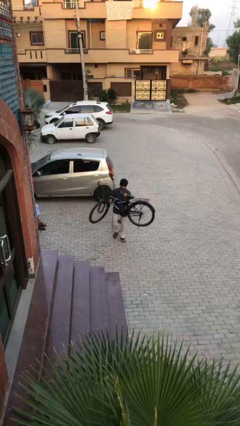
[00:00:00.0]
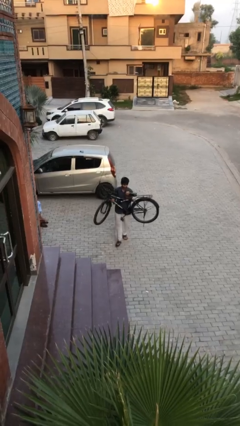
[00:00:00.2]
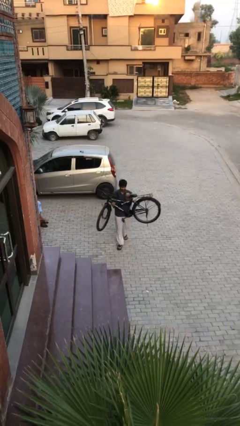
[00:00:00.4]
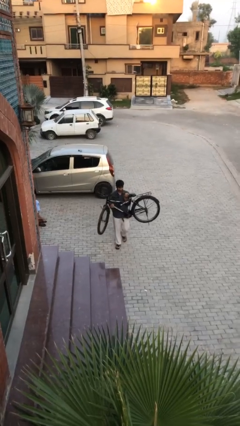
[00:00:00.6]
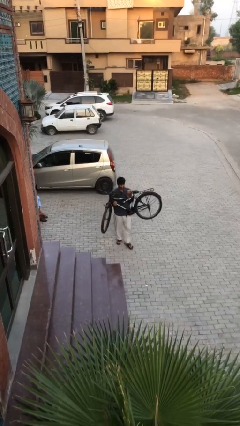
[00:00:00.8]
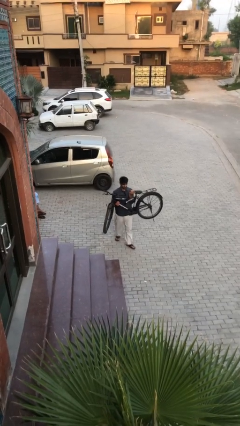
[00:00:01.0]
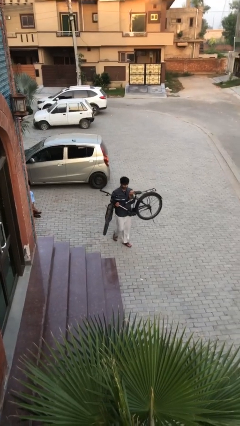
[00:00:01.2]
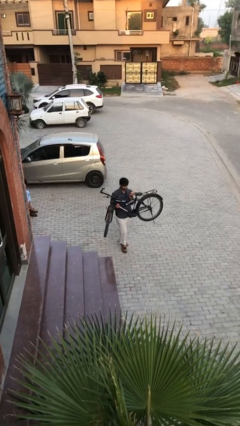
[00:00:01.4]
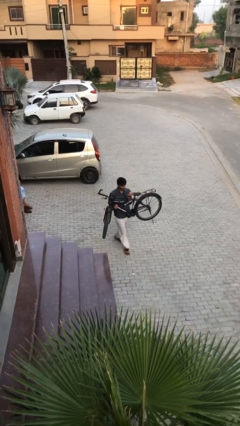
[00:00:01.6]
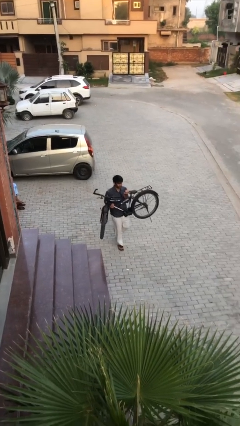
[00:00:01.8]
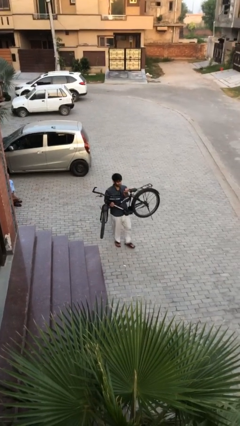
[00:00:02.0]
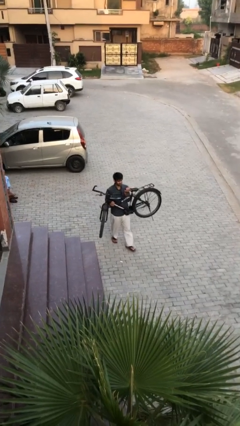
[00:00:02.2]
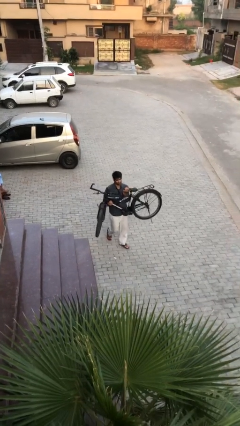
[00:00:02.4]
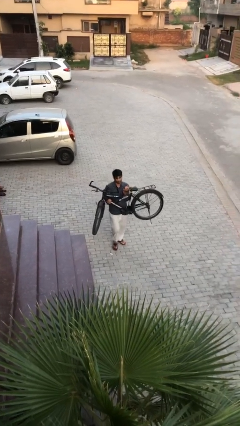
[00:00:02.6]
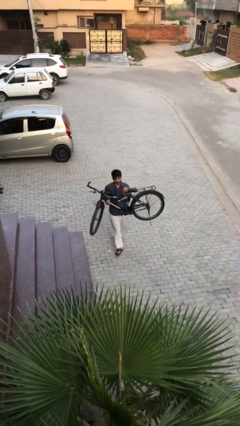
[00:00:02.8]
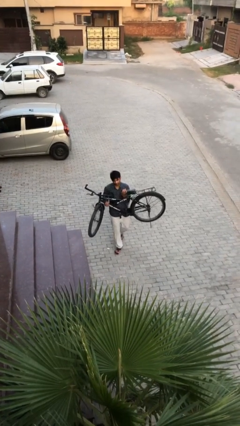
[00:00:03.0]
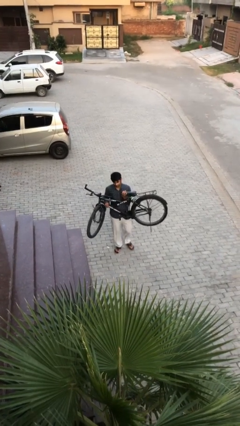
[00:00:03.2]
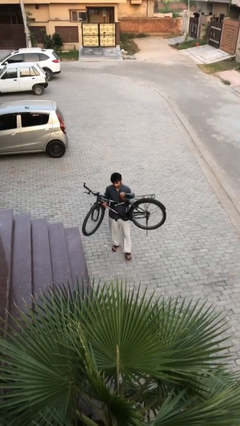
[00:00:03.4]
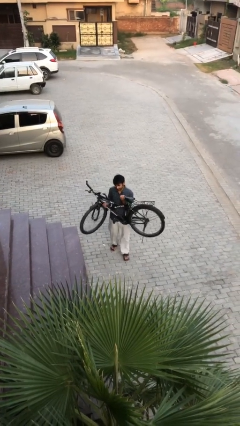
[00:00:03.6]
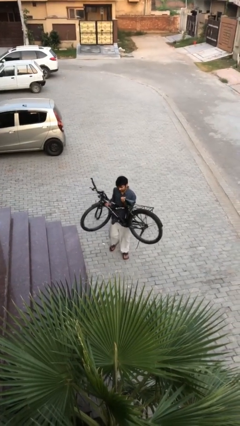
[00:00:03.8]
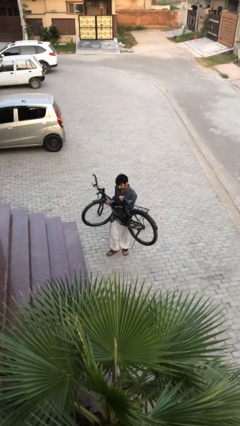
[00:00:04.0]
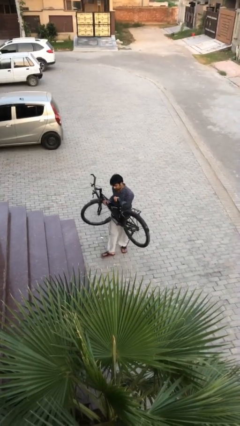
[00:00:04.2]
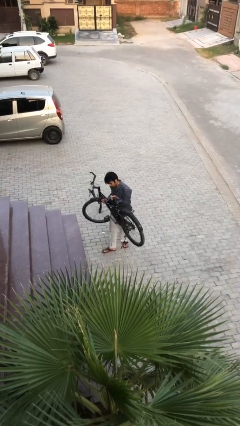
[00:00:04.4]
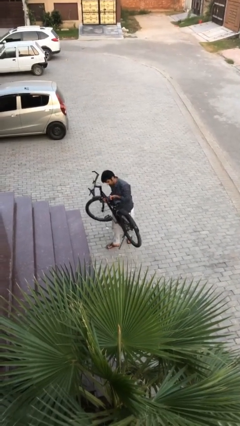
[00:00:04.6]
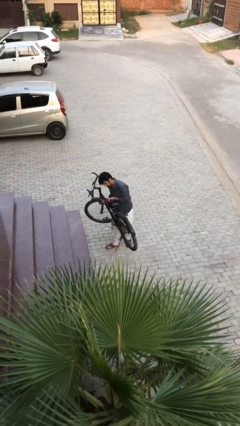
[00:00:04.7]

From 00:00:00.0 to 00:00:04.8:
person carries heavy object

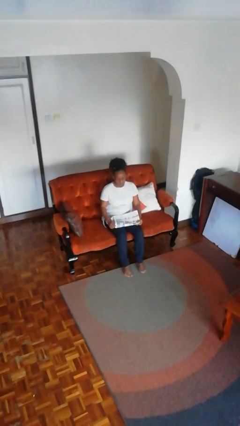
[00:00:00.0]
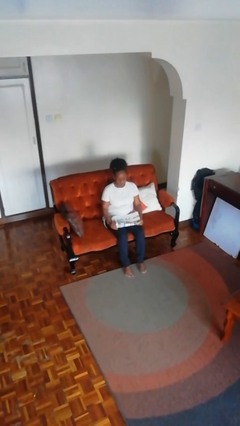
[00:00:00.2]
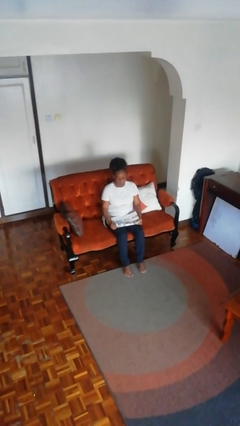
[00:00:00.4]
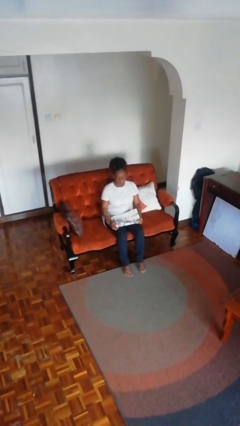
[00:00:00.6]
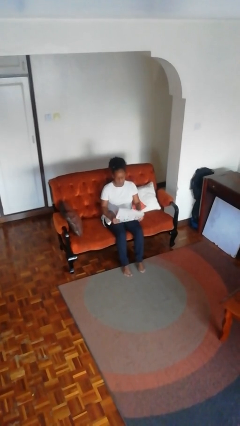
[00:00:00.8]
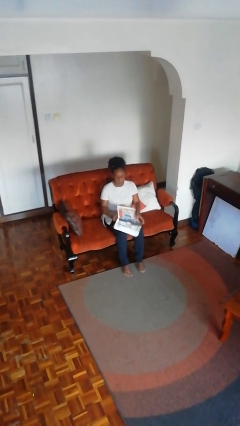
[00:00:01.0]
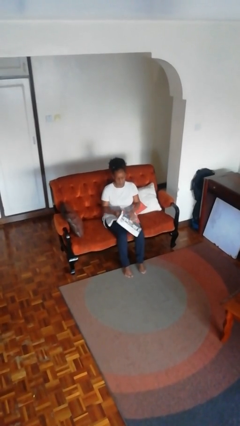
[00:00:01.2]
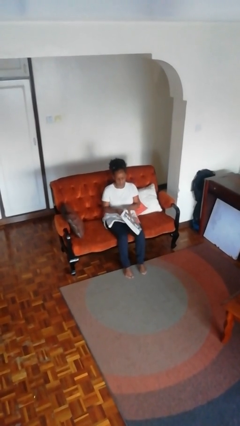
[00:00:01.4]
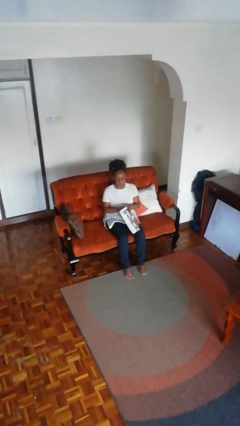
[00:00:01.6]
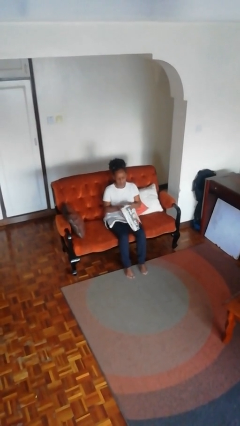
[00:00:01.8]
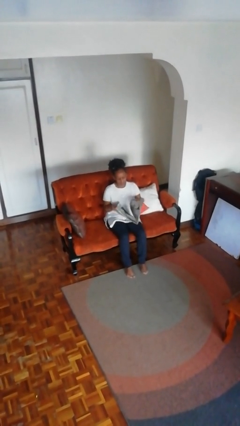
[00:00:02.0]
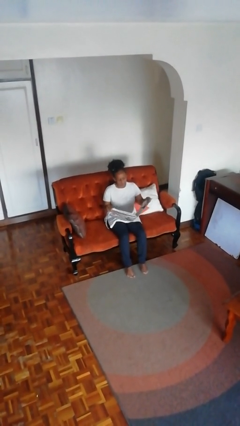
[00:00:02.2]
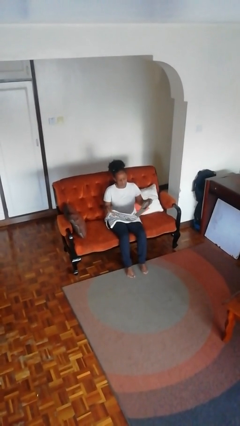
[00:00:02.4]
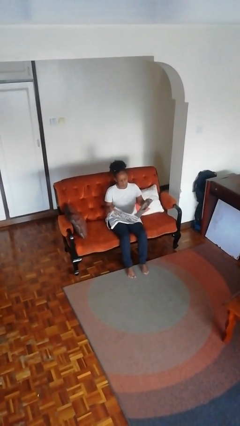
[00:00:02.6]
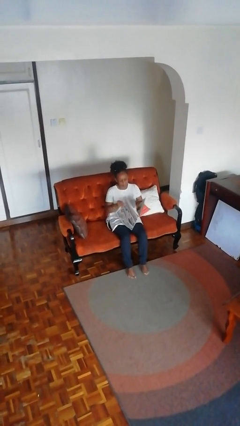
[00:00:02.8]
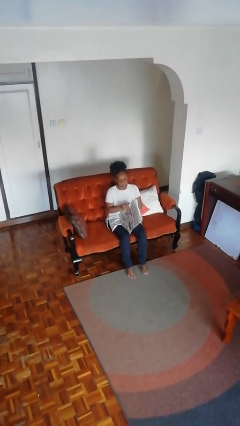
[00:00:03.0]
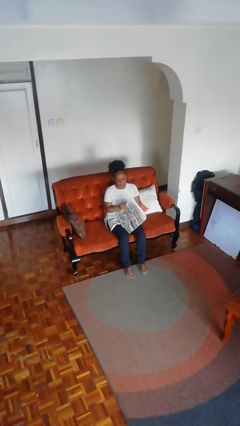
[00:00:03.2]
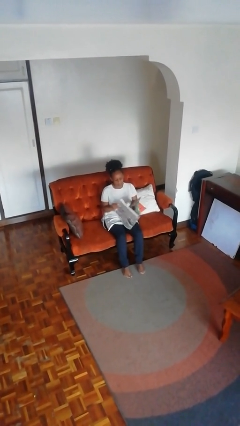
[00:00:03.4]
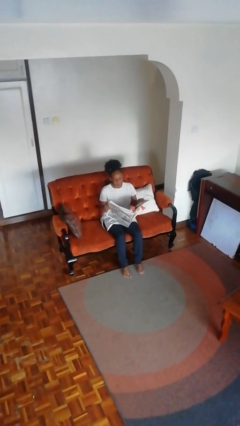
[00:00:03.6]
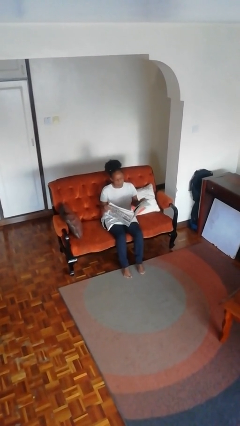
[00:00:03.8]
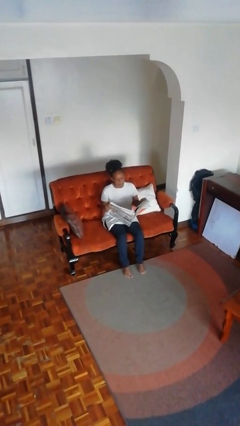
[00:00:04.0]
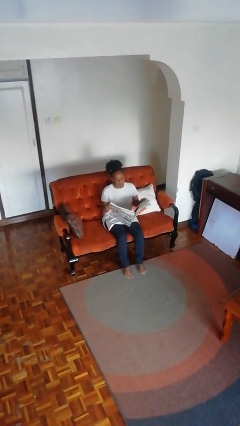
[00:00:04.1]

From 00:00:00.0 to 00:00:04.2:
person reads newspaper

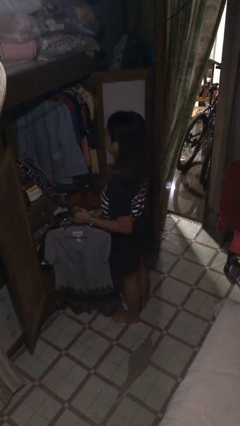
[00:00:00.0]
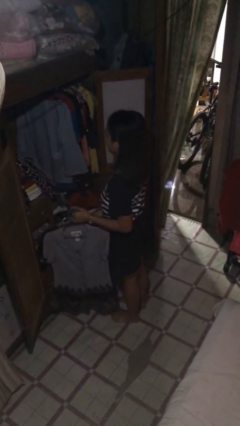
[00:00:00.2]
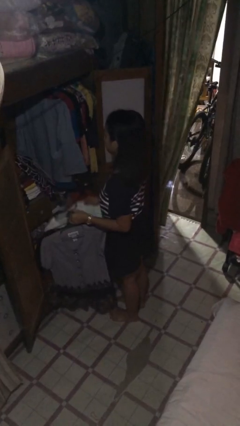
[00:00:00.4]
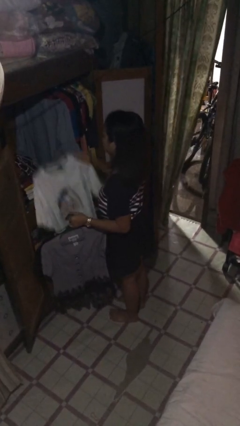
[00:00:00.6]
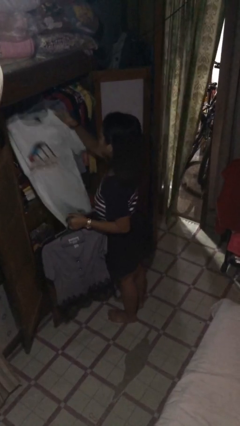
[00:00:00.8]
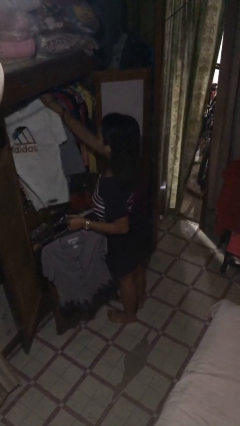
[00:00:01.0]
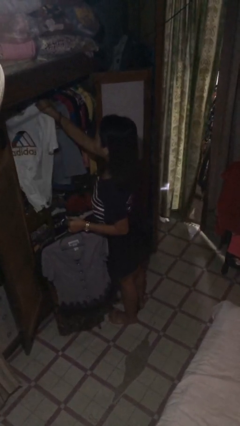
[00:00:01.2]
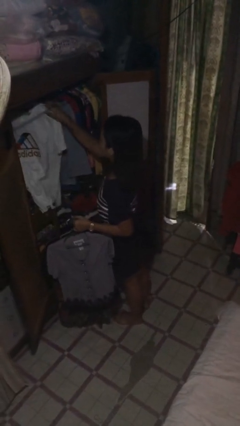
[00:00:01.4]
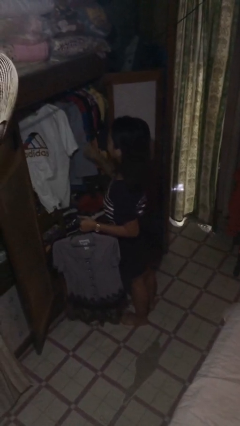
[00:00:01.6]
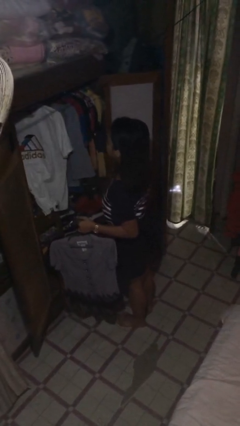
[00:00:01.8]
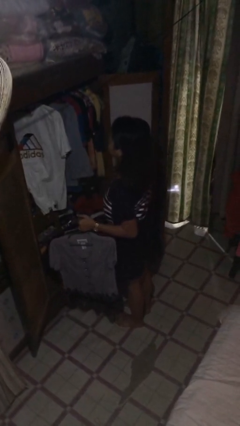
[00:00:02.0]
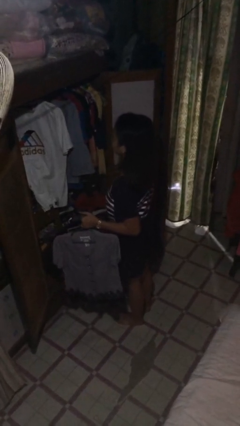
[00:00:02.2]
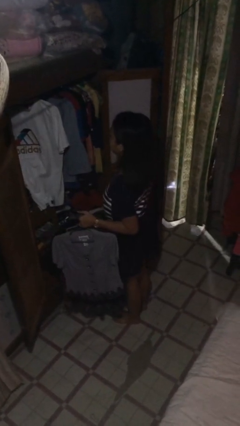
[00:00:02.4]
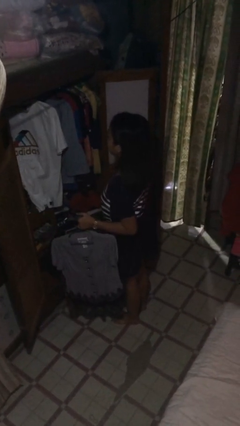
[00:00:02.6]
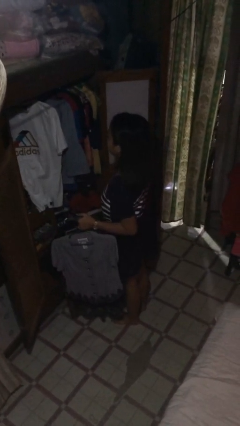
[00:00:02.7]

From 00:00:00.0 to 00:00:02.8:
person puts clothes into closet

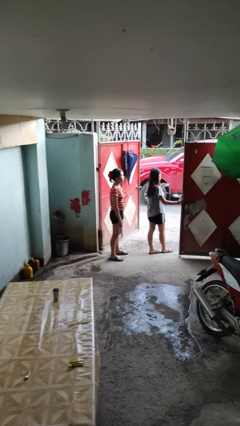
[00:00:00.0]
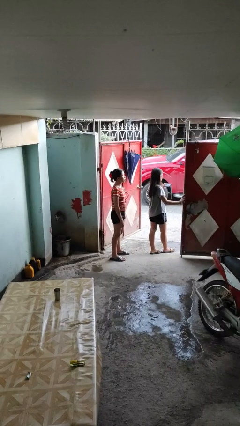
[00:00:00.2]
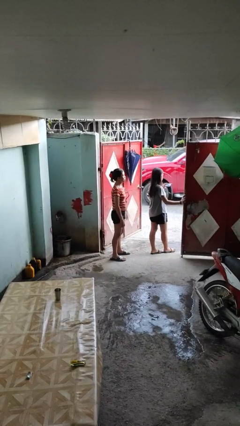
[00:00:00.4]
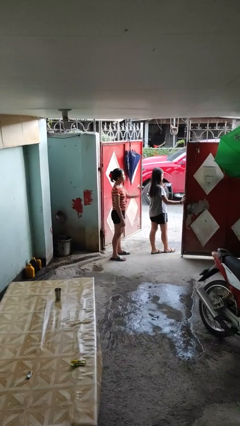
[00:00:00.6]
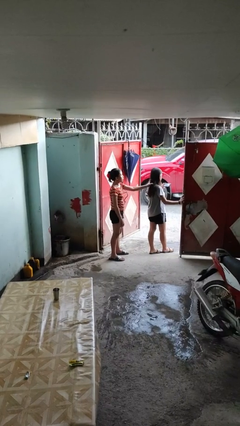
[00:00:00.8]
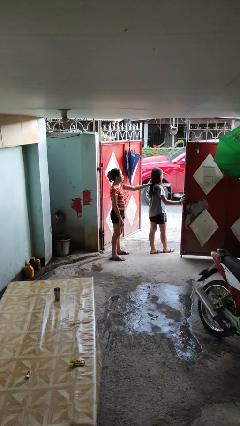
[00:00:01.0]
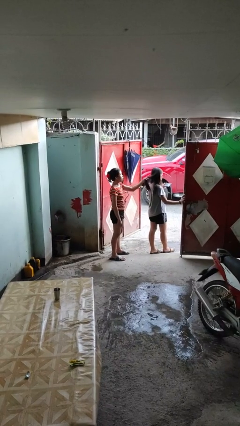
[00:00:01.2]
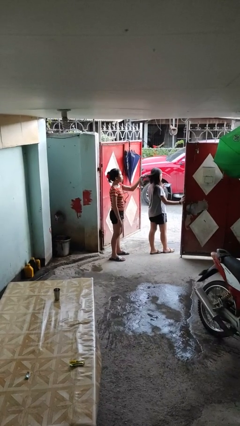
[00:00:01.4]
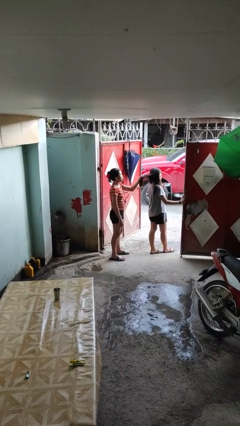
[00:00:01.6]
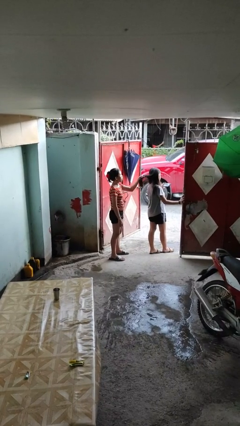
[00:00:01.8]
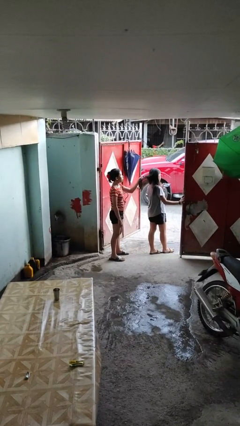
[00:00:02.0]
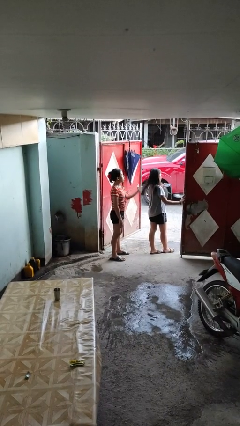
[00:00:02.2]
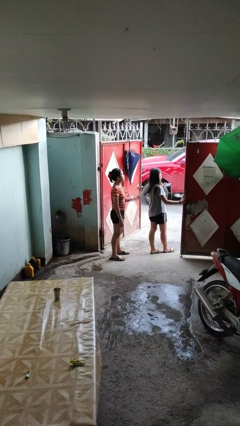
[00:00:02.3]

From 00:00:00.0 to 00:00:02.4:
person grabs person by hair

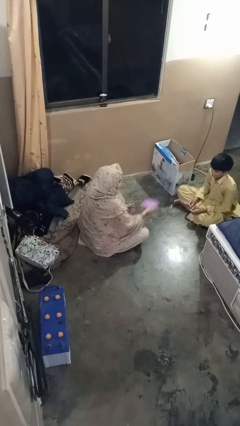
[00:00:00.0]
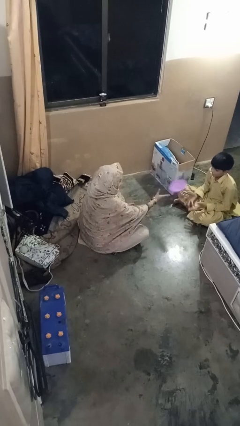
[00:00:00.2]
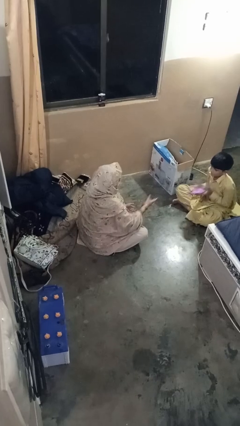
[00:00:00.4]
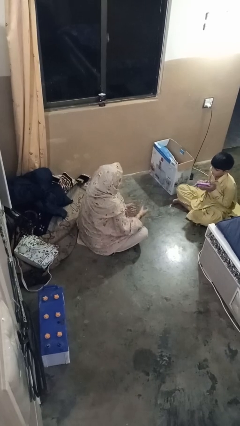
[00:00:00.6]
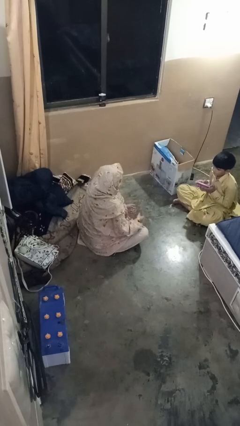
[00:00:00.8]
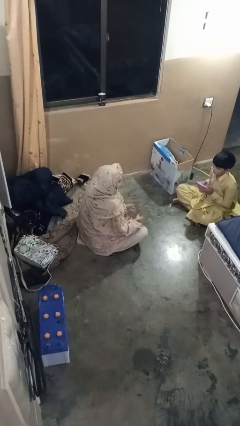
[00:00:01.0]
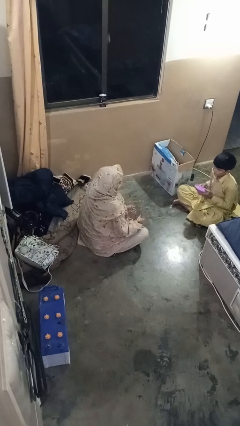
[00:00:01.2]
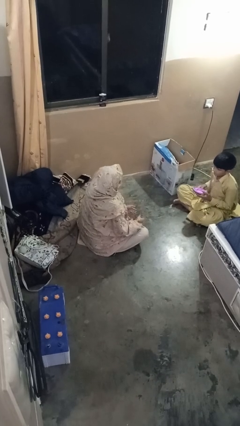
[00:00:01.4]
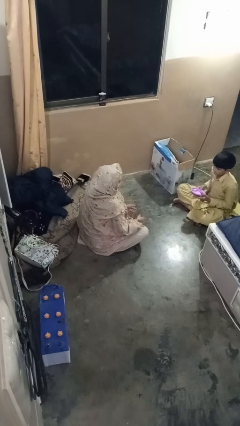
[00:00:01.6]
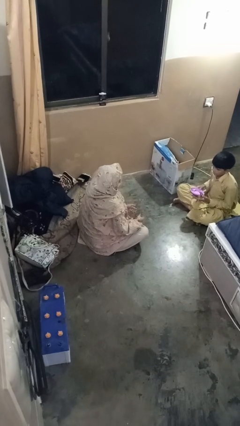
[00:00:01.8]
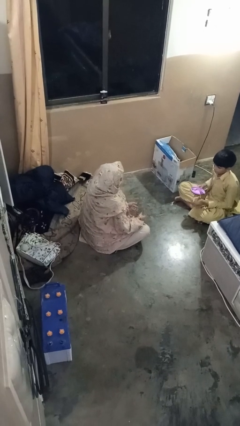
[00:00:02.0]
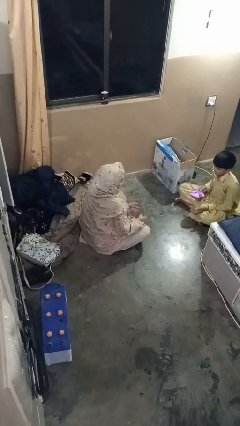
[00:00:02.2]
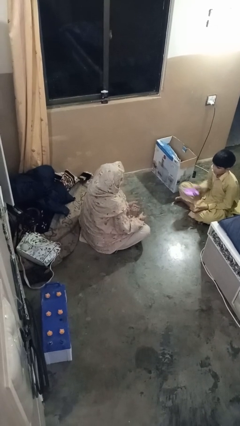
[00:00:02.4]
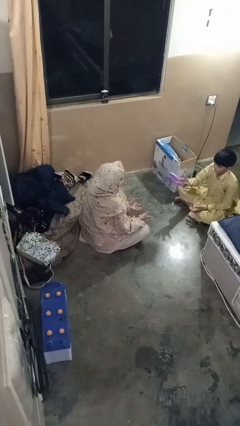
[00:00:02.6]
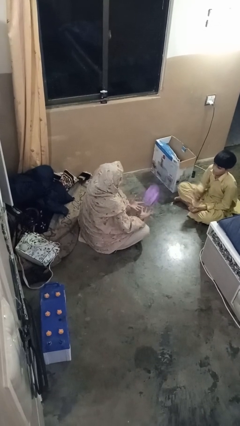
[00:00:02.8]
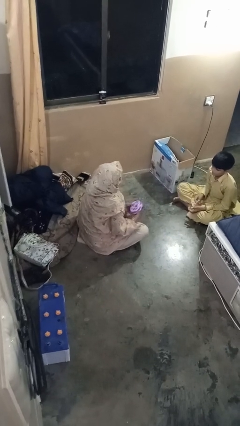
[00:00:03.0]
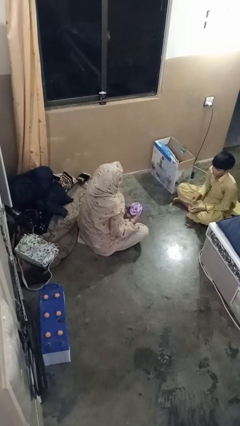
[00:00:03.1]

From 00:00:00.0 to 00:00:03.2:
person throws object to person

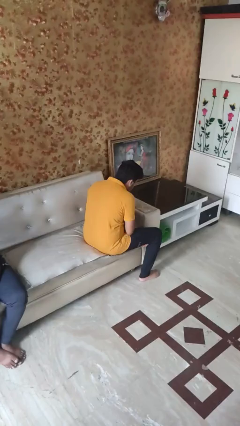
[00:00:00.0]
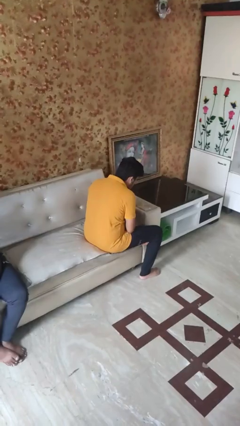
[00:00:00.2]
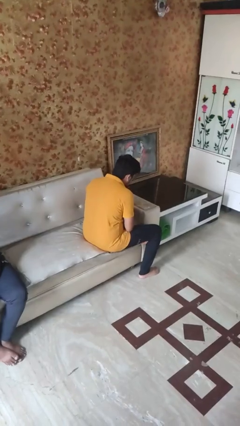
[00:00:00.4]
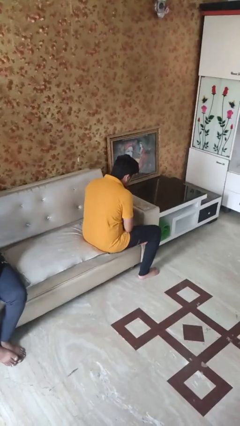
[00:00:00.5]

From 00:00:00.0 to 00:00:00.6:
person extinguishes candle
